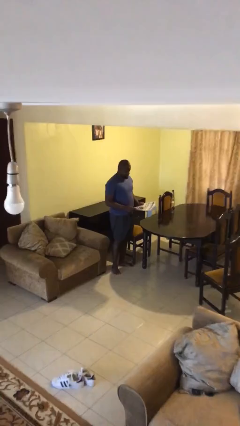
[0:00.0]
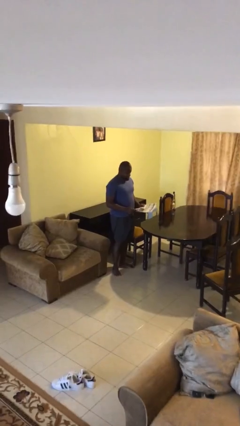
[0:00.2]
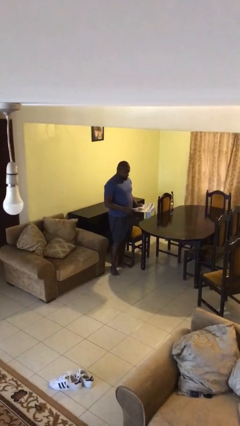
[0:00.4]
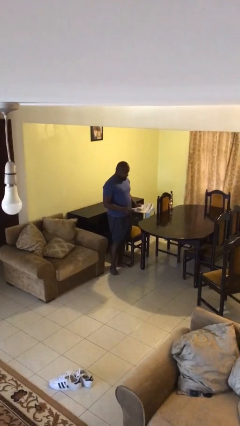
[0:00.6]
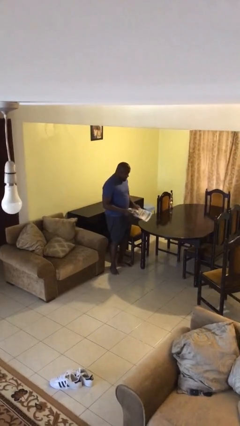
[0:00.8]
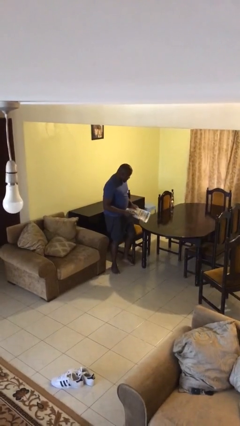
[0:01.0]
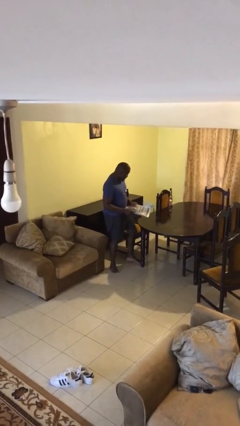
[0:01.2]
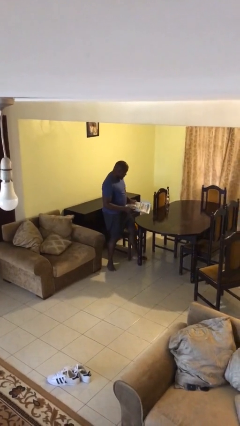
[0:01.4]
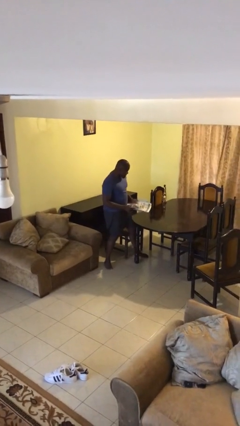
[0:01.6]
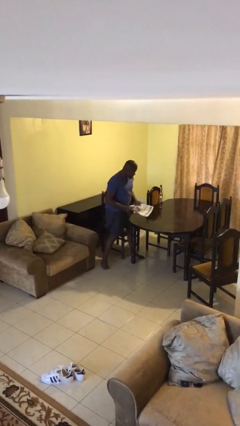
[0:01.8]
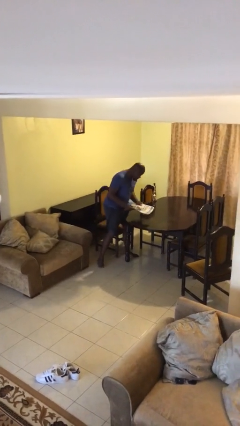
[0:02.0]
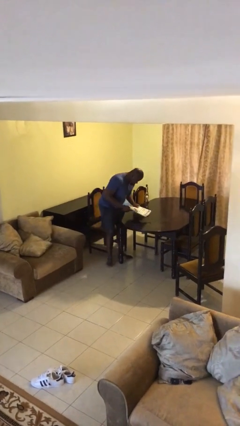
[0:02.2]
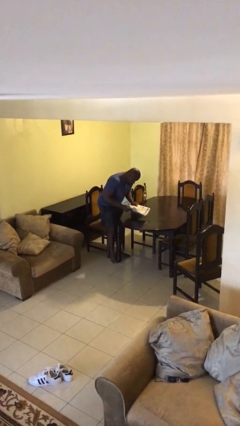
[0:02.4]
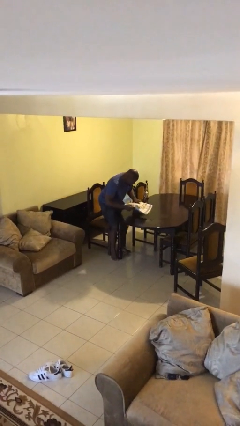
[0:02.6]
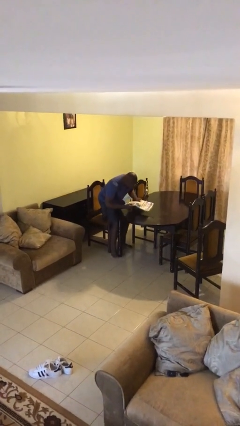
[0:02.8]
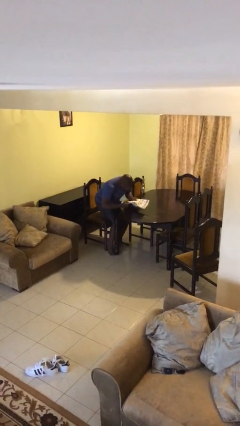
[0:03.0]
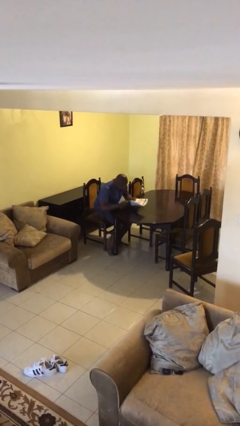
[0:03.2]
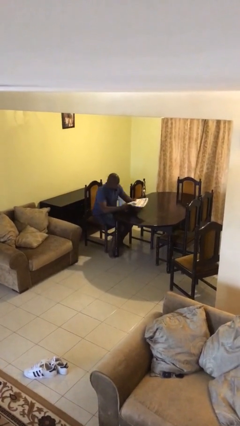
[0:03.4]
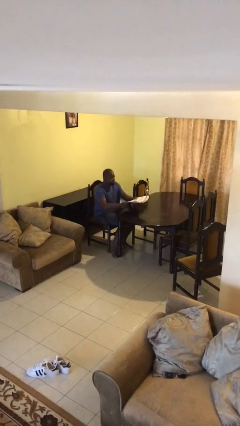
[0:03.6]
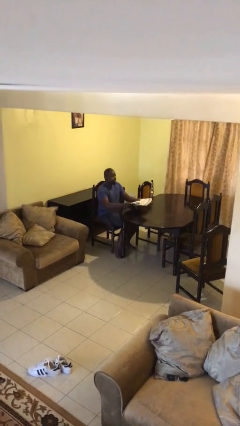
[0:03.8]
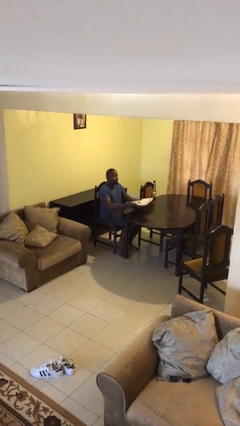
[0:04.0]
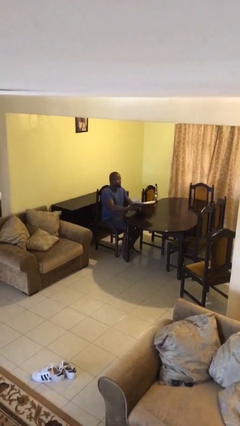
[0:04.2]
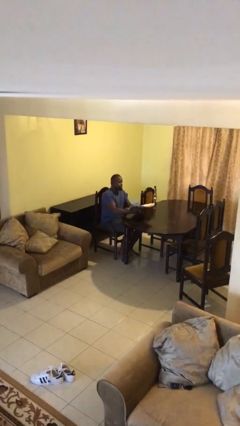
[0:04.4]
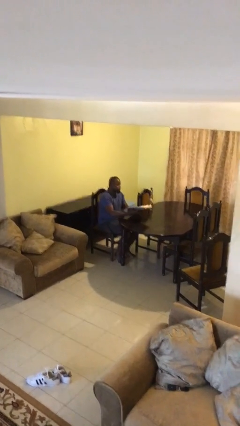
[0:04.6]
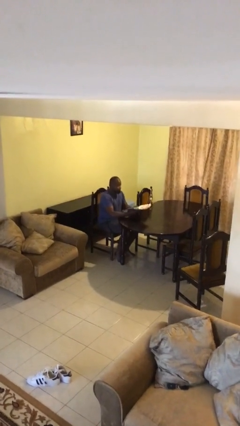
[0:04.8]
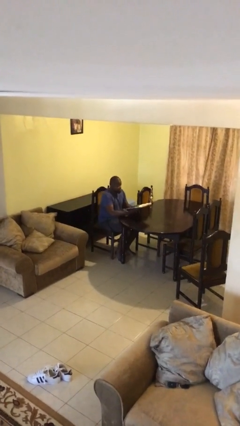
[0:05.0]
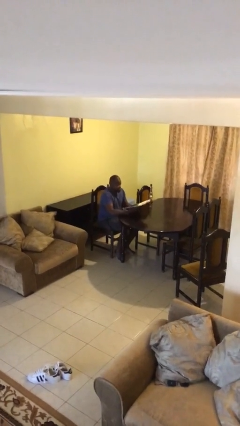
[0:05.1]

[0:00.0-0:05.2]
person sits down

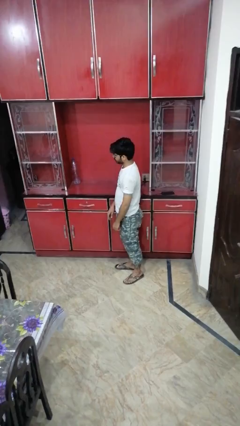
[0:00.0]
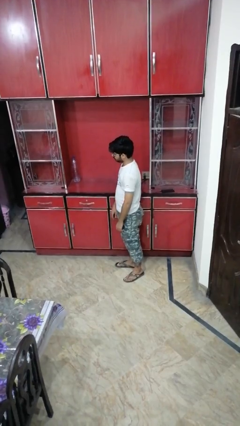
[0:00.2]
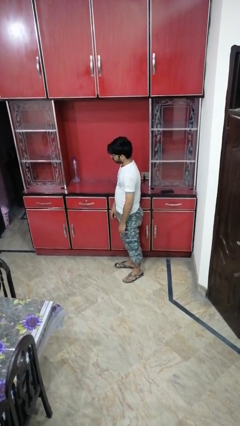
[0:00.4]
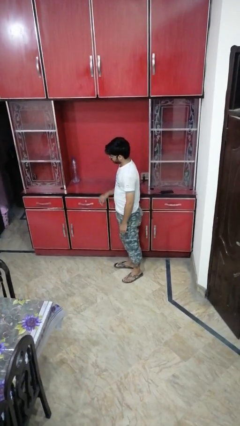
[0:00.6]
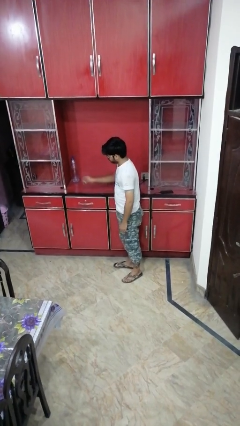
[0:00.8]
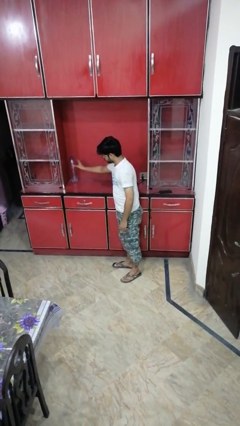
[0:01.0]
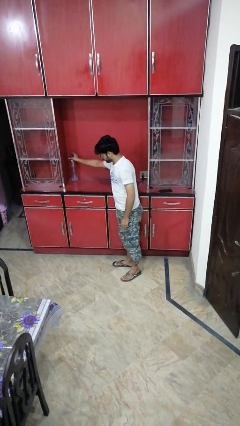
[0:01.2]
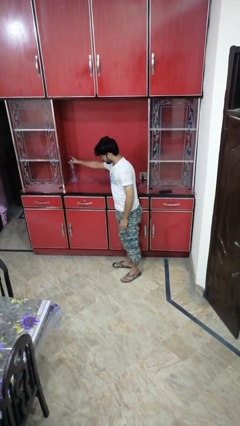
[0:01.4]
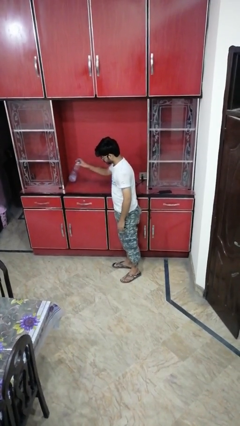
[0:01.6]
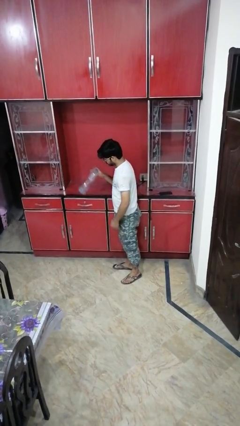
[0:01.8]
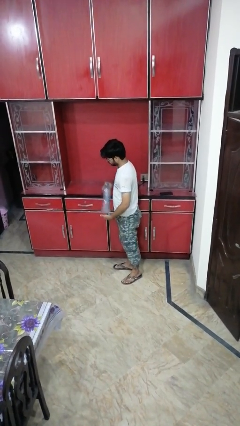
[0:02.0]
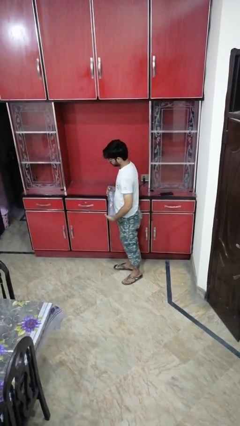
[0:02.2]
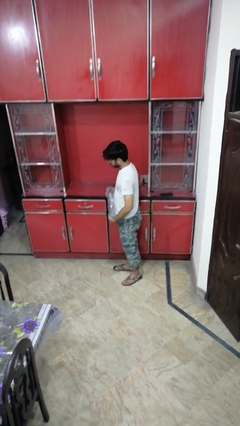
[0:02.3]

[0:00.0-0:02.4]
person picks up object from countertop

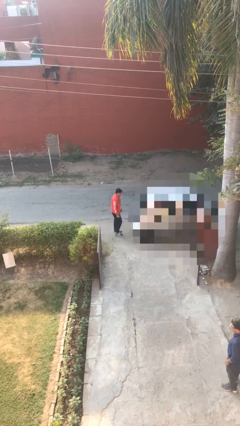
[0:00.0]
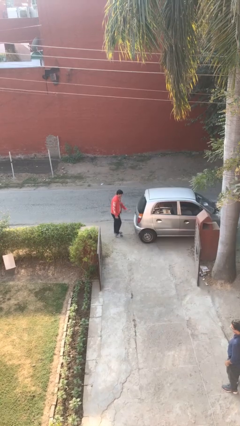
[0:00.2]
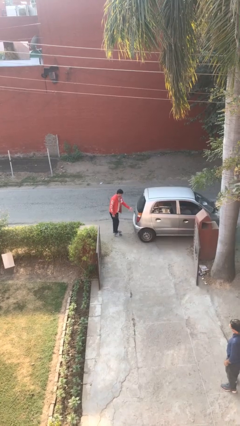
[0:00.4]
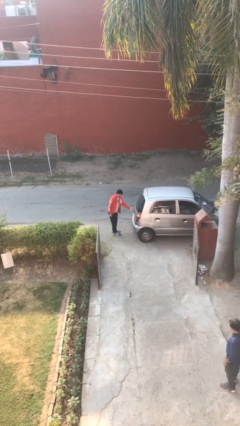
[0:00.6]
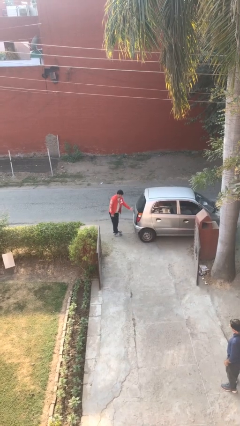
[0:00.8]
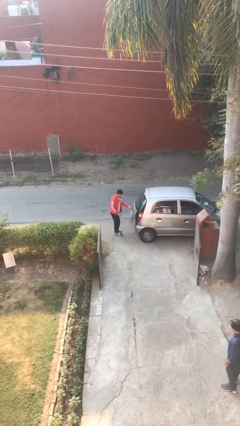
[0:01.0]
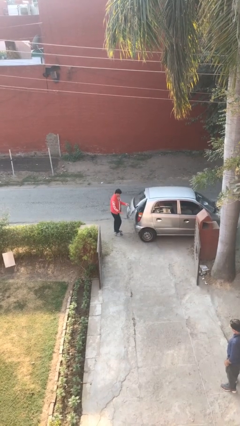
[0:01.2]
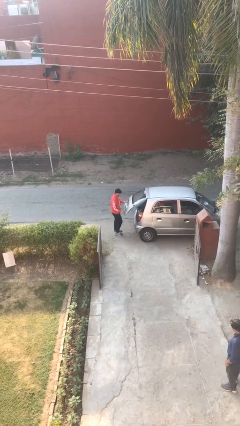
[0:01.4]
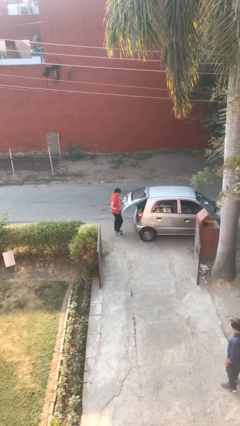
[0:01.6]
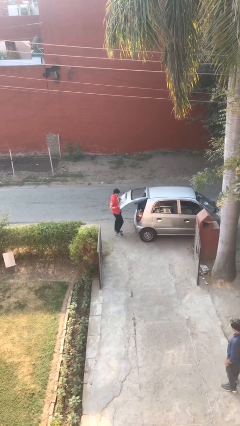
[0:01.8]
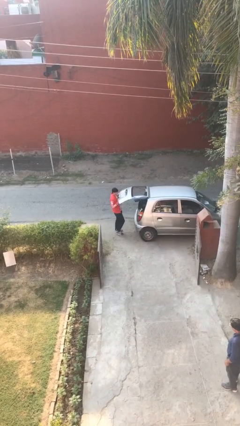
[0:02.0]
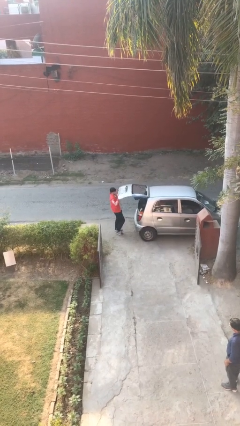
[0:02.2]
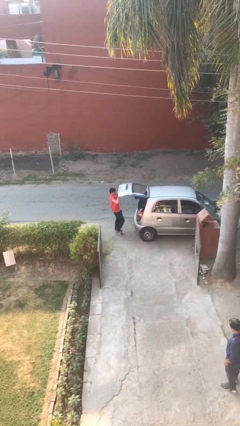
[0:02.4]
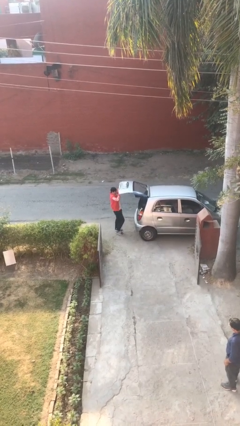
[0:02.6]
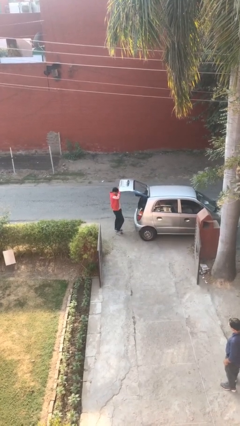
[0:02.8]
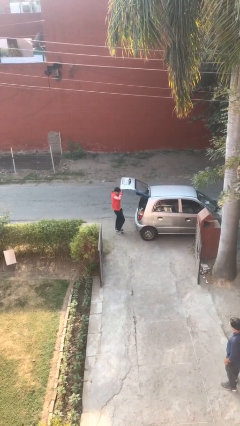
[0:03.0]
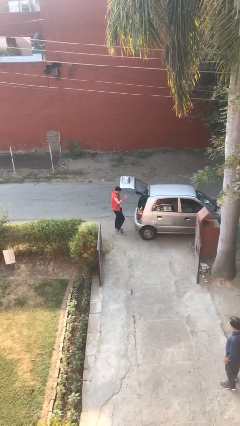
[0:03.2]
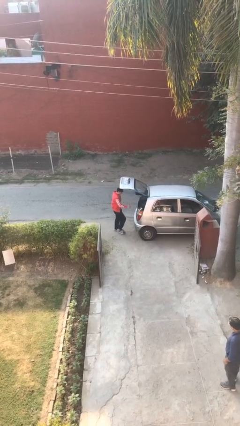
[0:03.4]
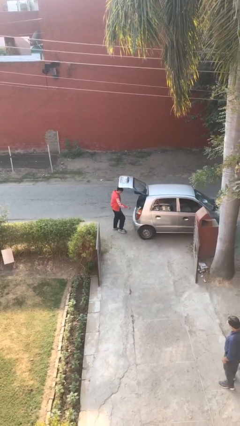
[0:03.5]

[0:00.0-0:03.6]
person opens car trunk

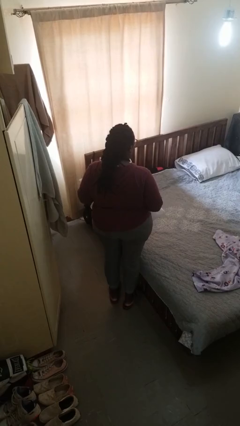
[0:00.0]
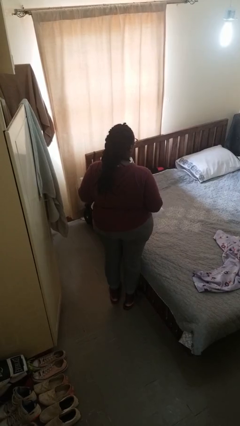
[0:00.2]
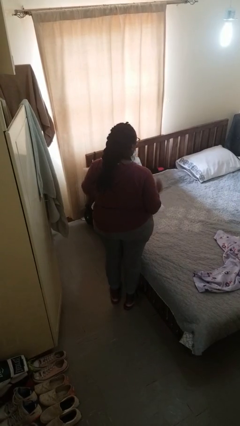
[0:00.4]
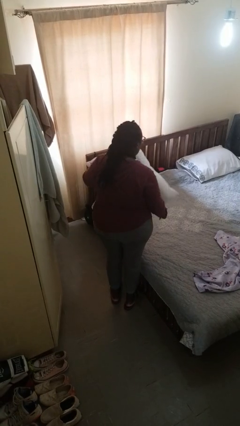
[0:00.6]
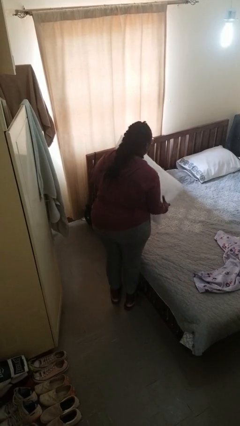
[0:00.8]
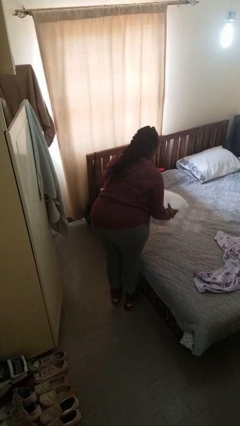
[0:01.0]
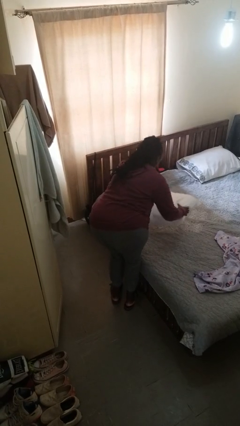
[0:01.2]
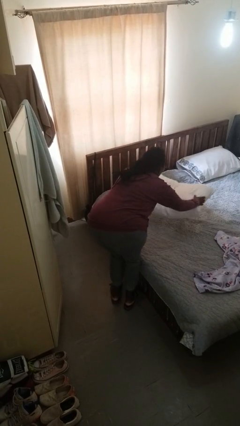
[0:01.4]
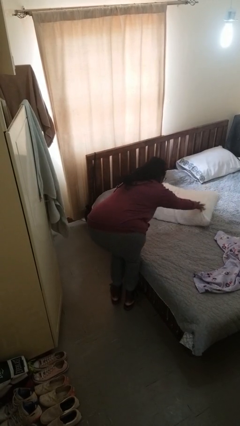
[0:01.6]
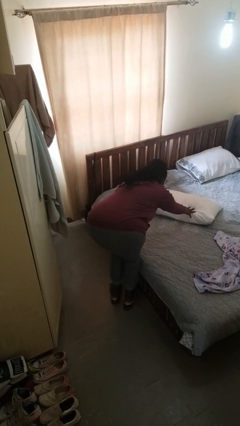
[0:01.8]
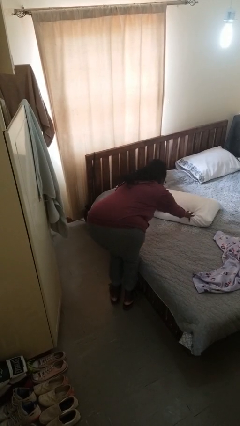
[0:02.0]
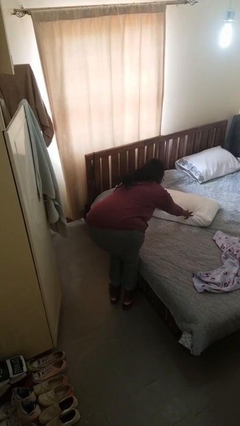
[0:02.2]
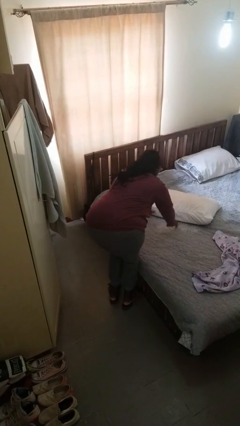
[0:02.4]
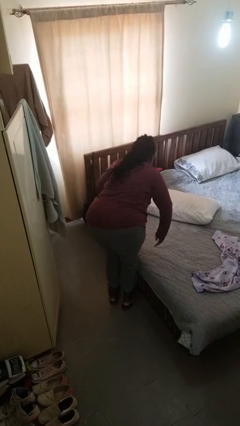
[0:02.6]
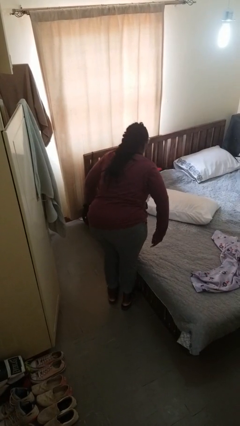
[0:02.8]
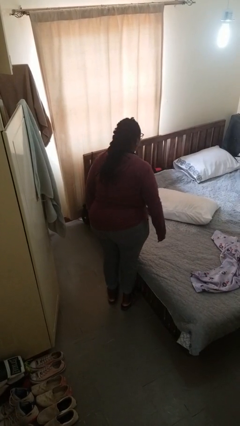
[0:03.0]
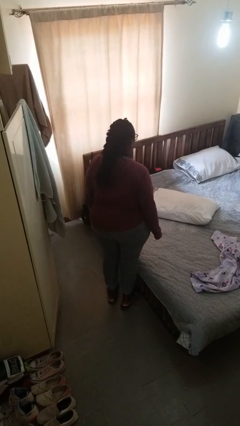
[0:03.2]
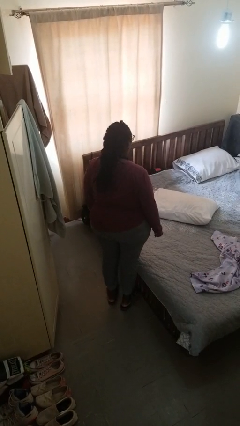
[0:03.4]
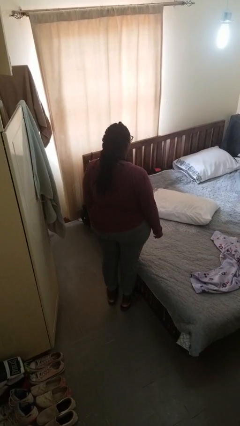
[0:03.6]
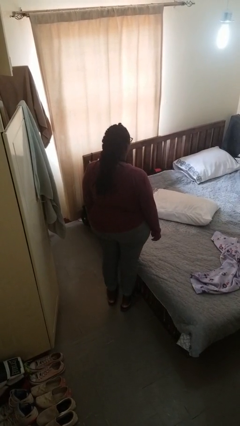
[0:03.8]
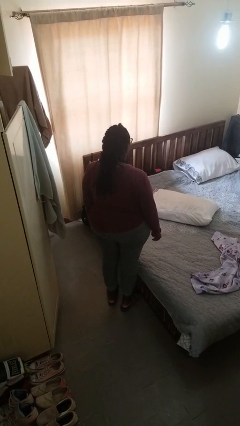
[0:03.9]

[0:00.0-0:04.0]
person puts down object on bed

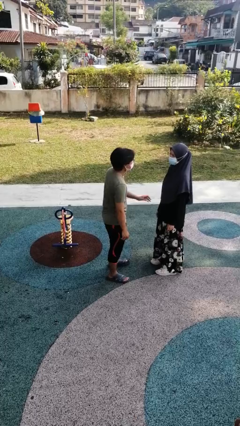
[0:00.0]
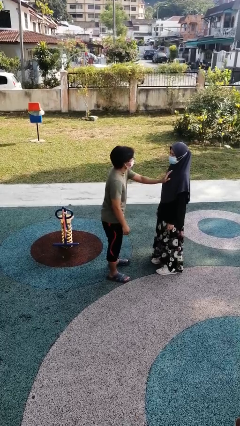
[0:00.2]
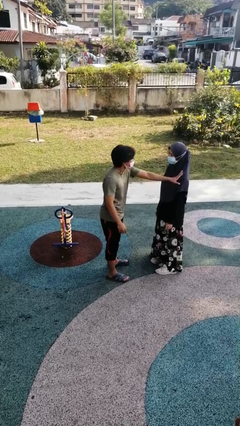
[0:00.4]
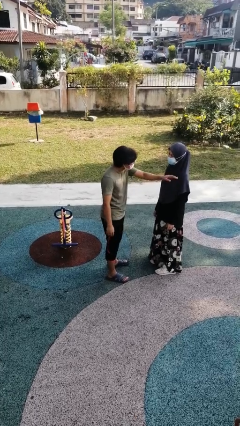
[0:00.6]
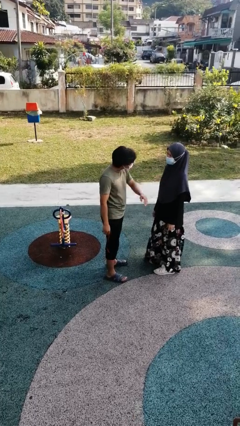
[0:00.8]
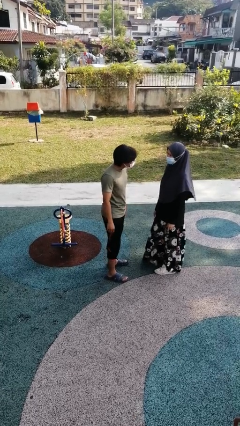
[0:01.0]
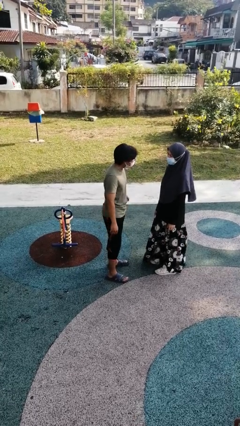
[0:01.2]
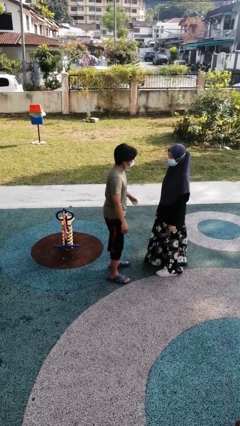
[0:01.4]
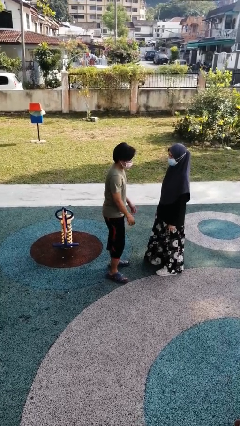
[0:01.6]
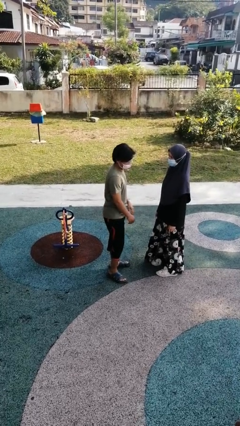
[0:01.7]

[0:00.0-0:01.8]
person shoves person

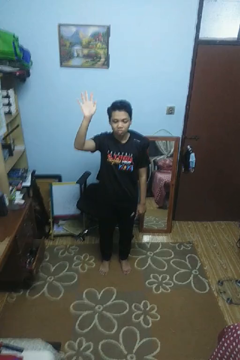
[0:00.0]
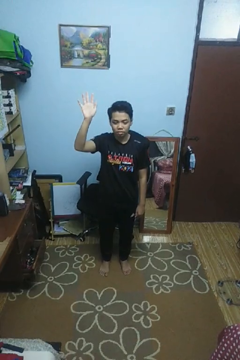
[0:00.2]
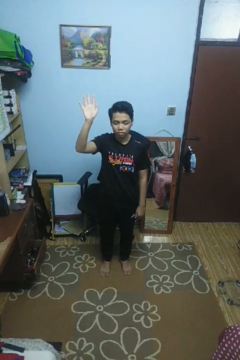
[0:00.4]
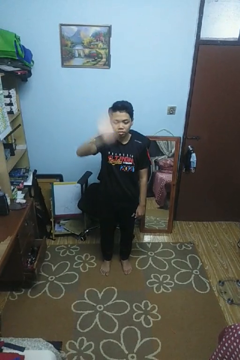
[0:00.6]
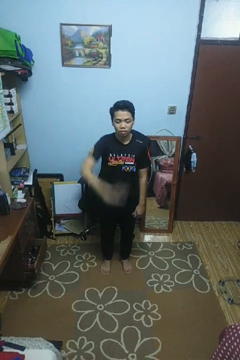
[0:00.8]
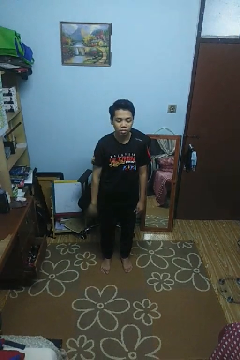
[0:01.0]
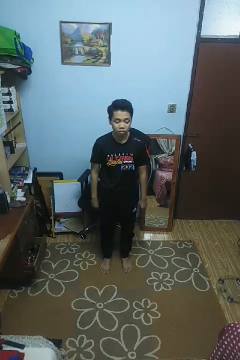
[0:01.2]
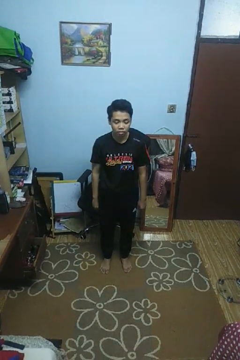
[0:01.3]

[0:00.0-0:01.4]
person gestures swipe down
